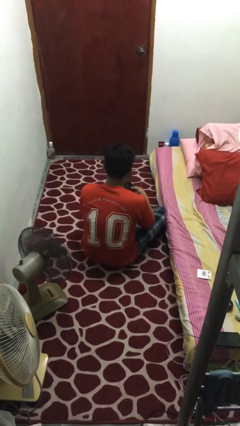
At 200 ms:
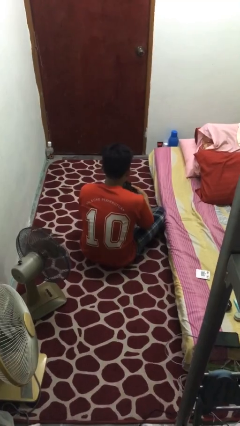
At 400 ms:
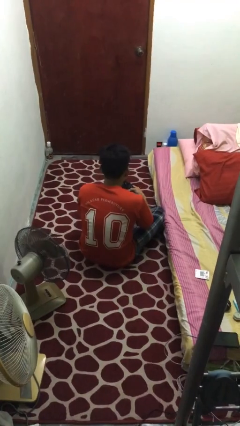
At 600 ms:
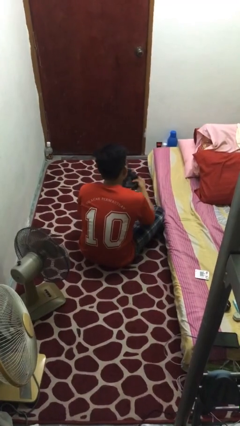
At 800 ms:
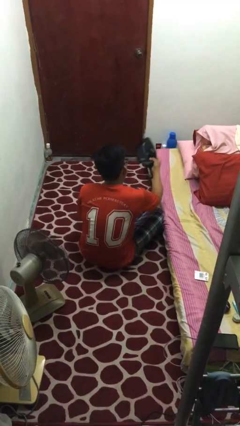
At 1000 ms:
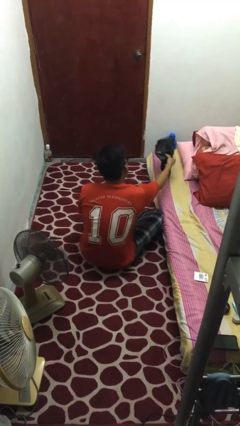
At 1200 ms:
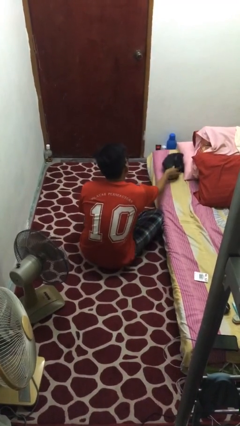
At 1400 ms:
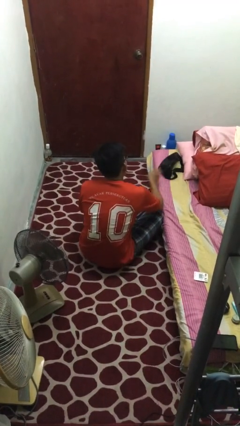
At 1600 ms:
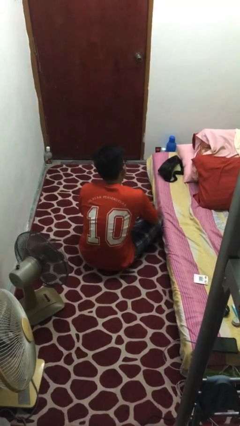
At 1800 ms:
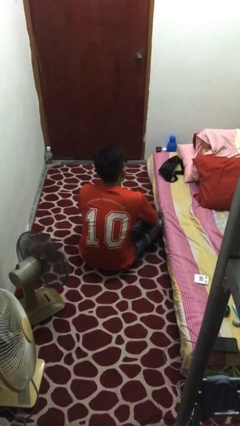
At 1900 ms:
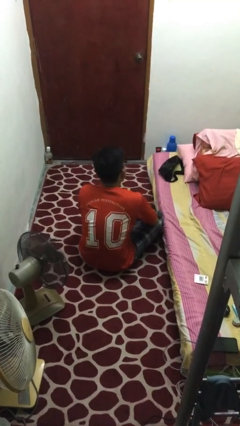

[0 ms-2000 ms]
person puts down object on bed

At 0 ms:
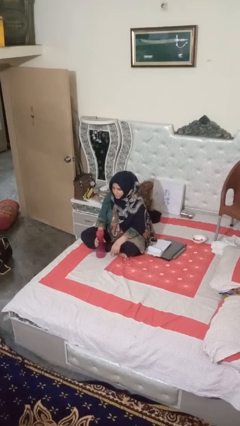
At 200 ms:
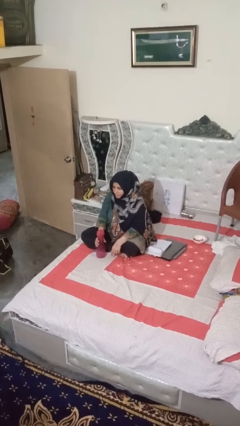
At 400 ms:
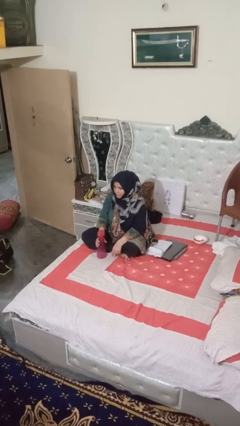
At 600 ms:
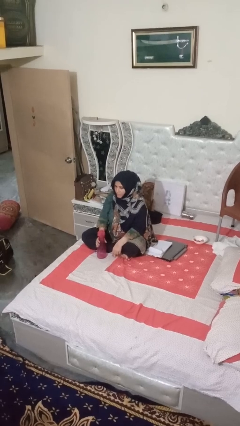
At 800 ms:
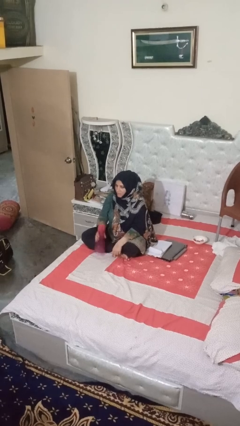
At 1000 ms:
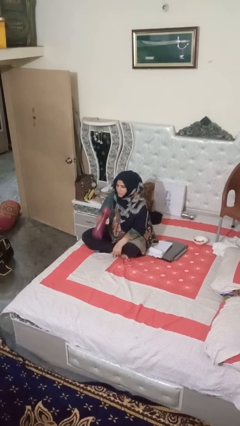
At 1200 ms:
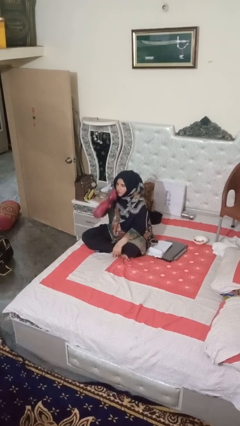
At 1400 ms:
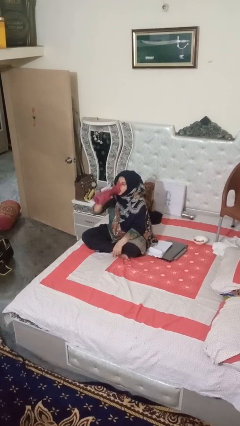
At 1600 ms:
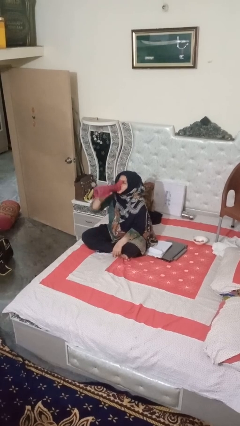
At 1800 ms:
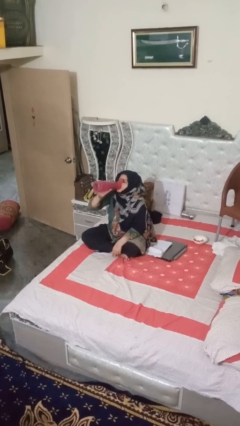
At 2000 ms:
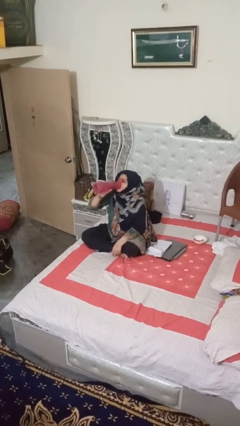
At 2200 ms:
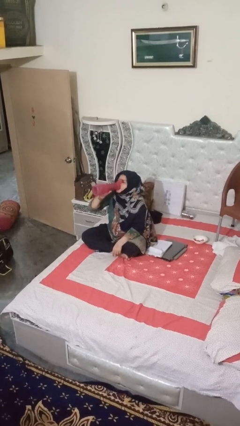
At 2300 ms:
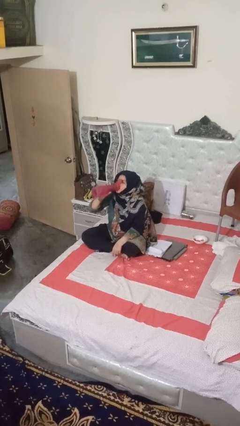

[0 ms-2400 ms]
person drinks from bottle

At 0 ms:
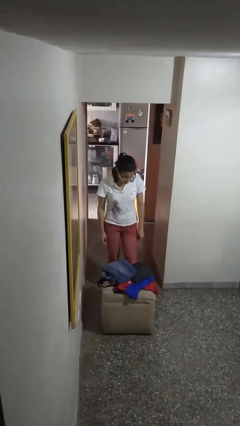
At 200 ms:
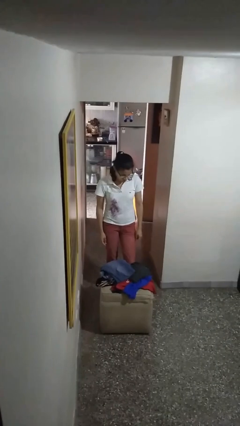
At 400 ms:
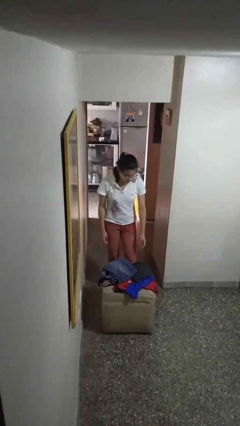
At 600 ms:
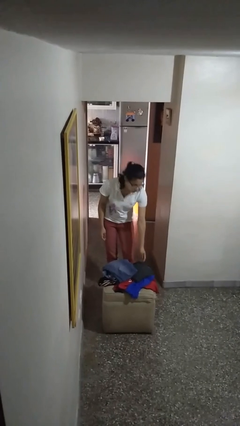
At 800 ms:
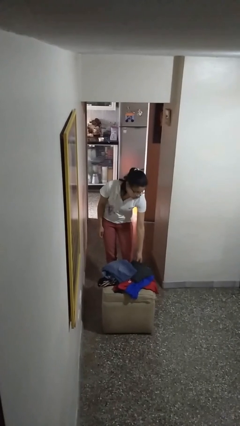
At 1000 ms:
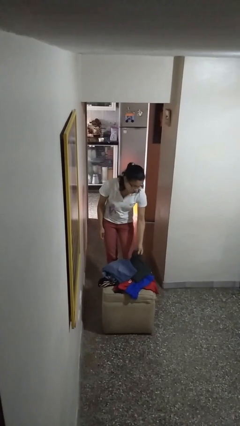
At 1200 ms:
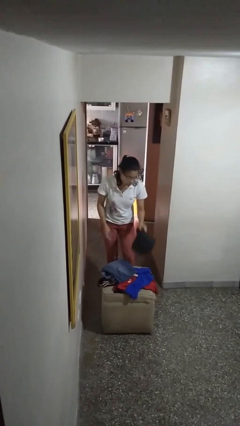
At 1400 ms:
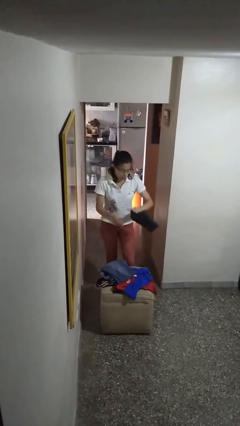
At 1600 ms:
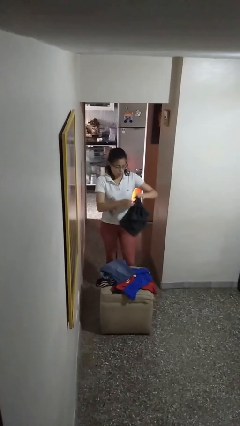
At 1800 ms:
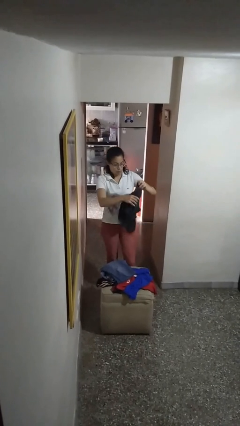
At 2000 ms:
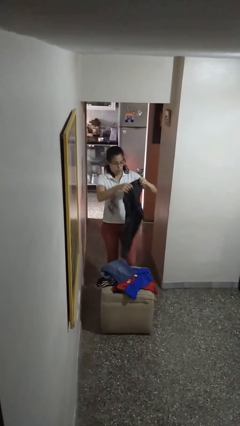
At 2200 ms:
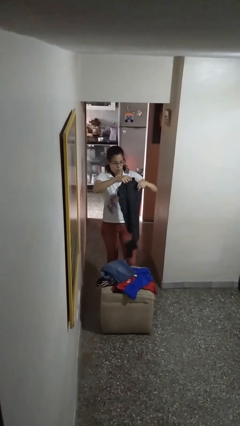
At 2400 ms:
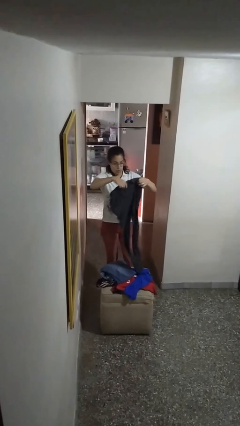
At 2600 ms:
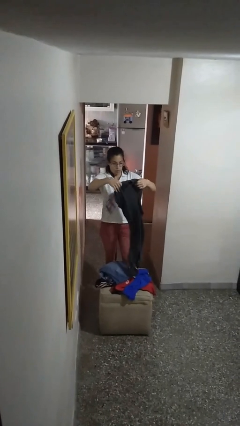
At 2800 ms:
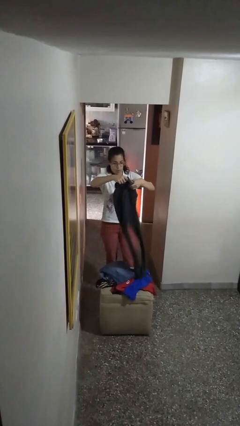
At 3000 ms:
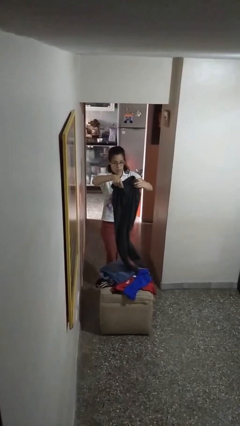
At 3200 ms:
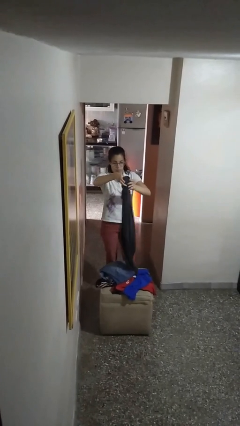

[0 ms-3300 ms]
person folds pants

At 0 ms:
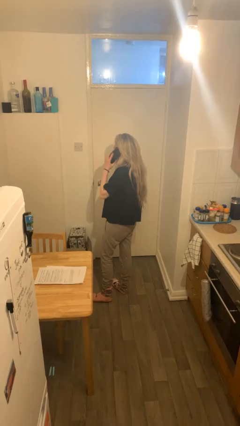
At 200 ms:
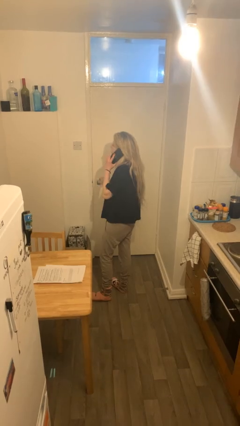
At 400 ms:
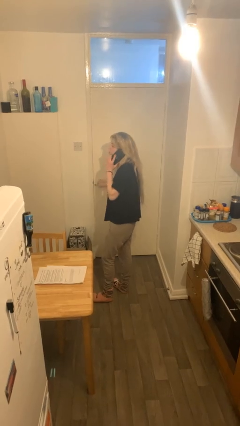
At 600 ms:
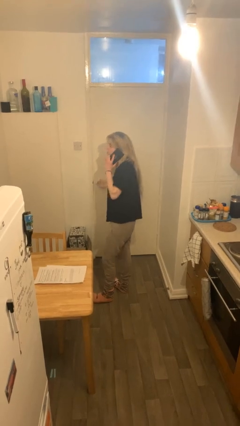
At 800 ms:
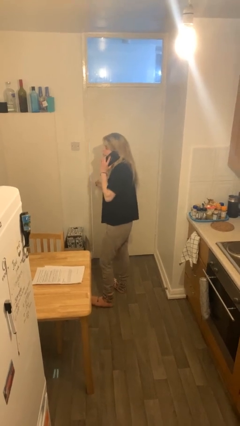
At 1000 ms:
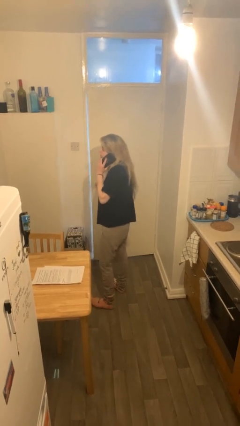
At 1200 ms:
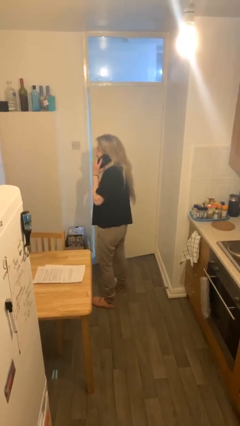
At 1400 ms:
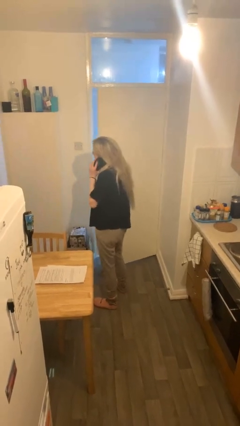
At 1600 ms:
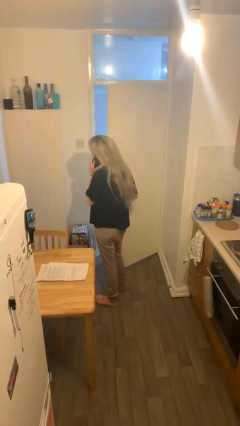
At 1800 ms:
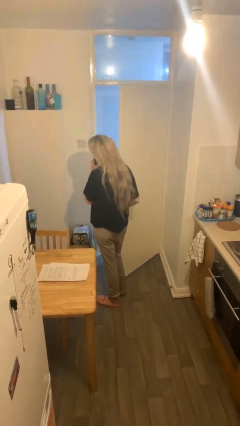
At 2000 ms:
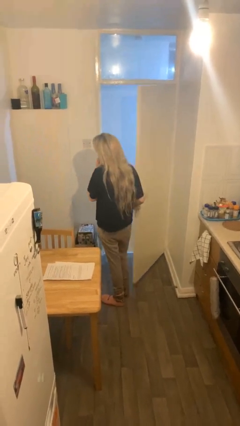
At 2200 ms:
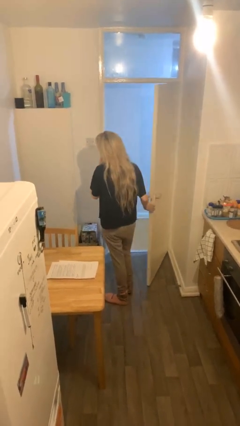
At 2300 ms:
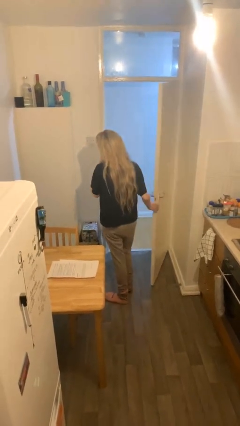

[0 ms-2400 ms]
person opens facility door

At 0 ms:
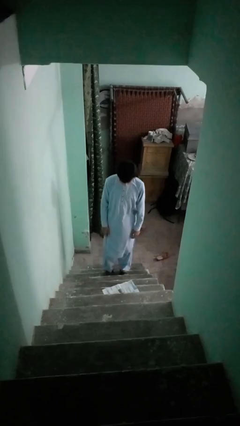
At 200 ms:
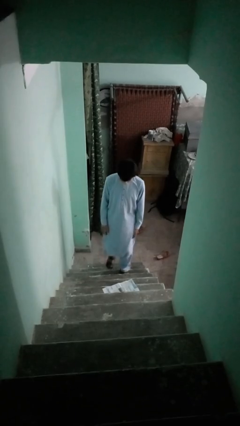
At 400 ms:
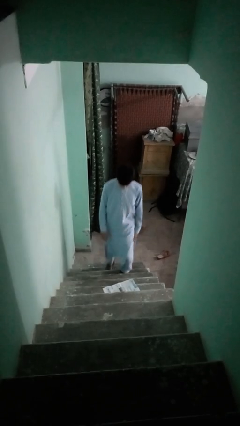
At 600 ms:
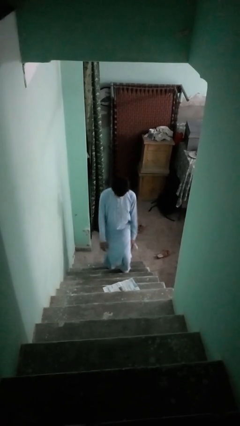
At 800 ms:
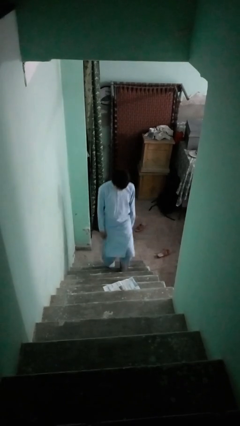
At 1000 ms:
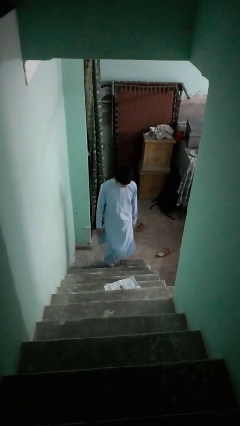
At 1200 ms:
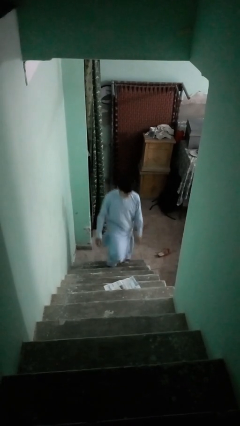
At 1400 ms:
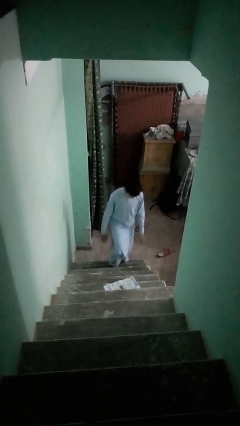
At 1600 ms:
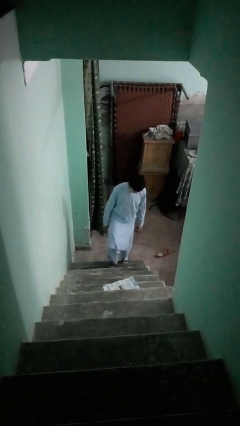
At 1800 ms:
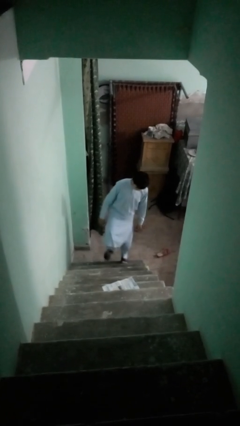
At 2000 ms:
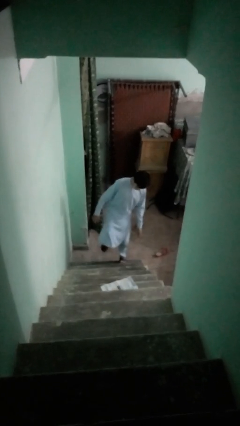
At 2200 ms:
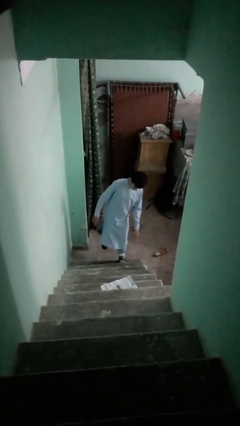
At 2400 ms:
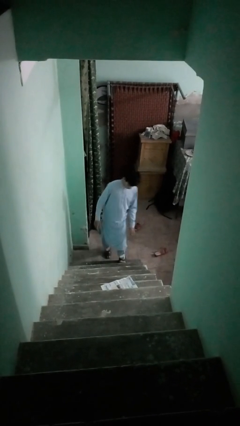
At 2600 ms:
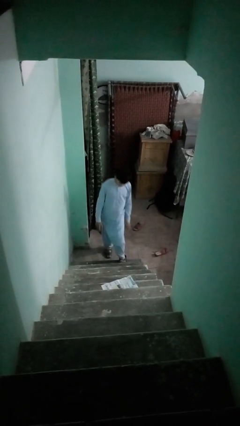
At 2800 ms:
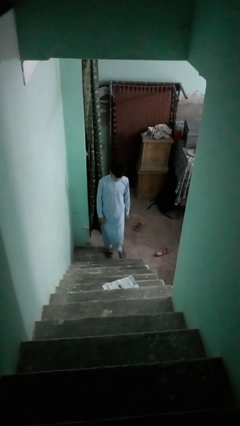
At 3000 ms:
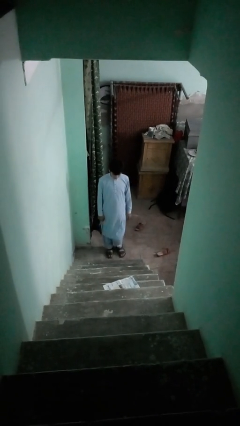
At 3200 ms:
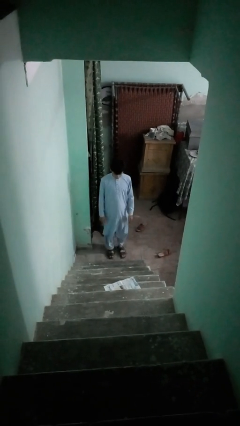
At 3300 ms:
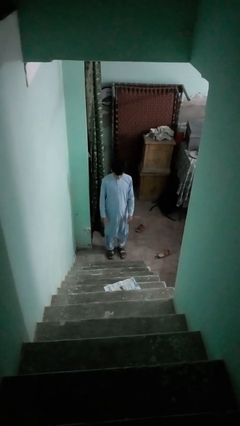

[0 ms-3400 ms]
person climbs down stairs

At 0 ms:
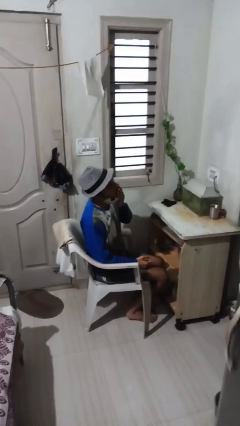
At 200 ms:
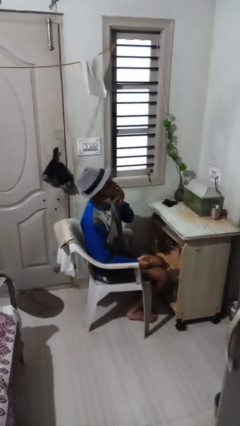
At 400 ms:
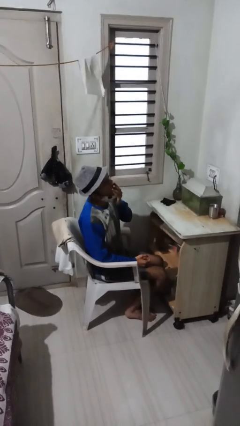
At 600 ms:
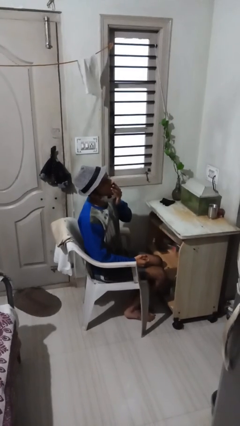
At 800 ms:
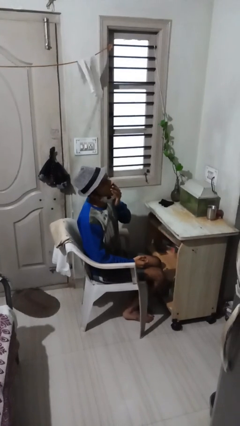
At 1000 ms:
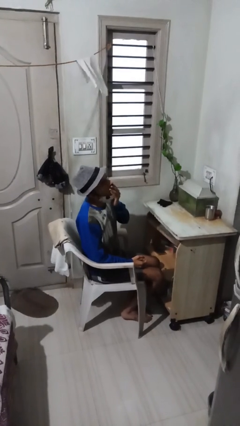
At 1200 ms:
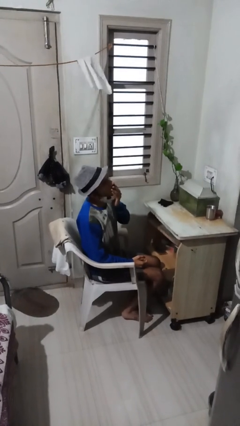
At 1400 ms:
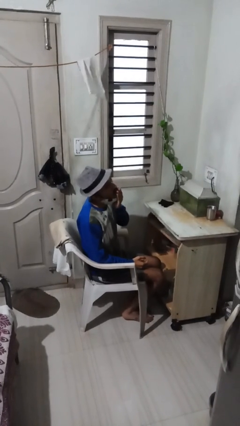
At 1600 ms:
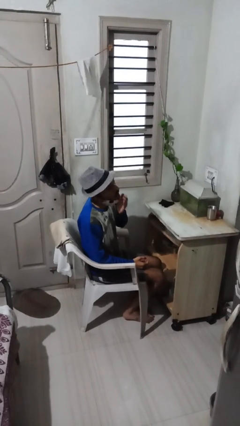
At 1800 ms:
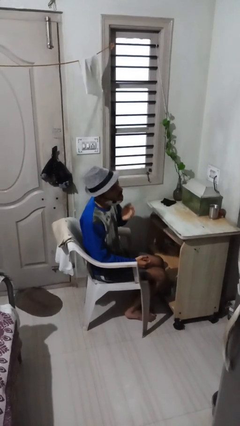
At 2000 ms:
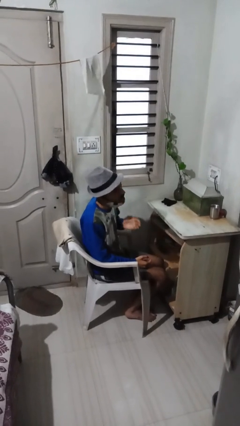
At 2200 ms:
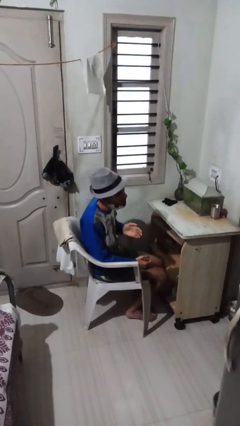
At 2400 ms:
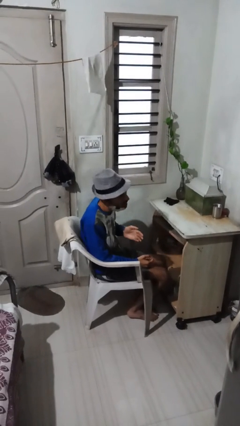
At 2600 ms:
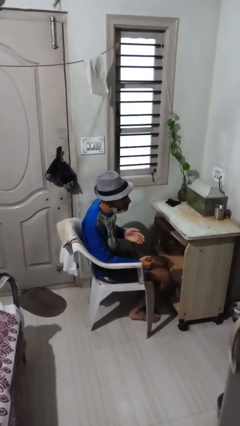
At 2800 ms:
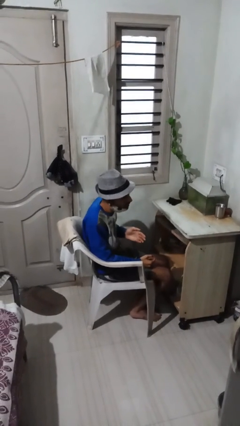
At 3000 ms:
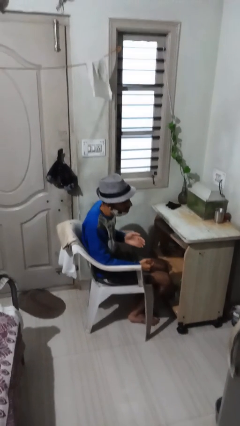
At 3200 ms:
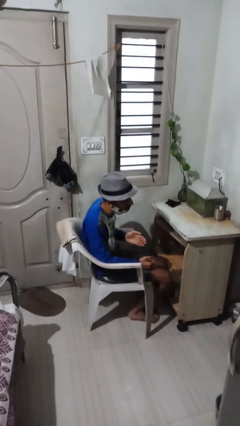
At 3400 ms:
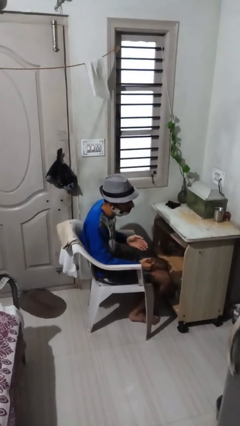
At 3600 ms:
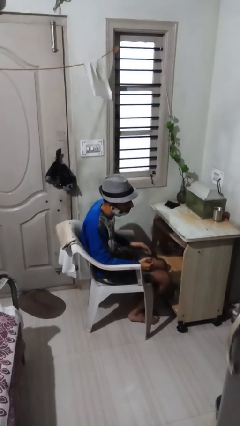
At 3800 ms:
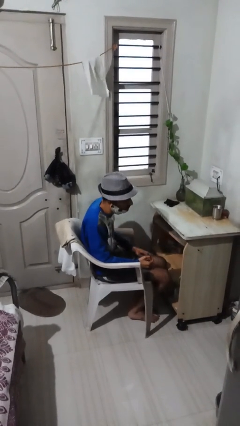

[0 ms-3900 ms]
person yawns
